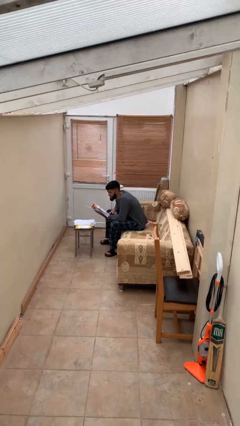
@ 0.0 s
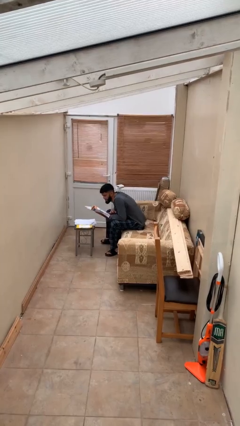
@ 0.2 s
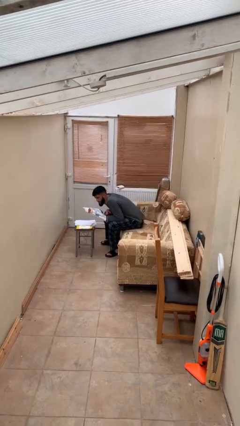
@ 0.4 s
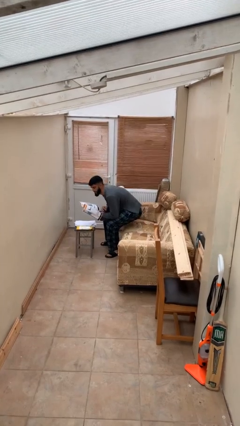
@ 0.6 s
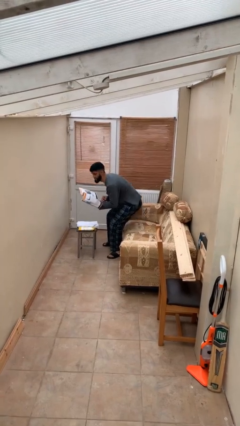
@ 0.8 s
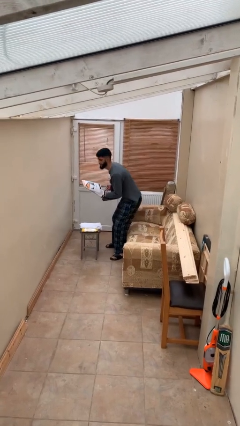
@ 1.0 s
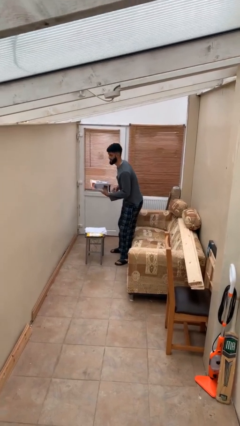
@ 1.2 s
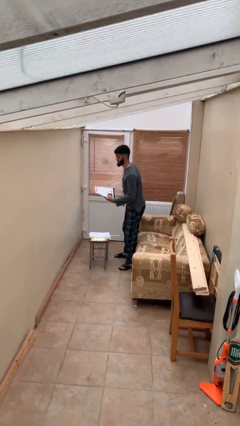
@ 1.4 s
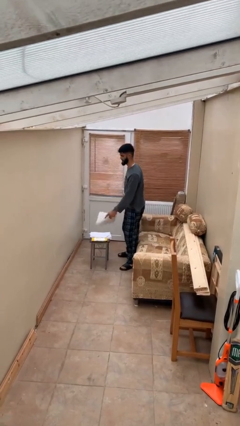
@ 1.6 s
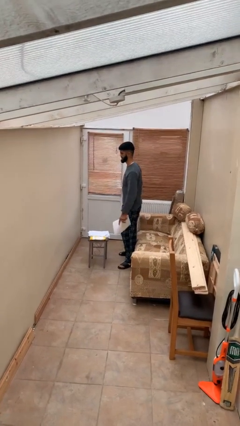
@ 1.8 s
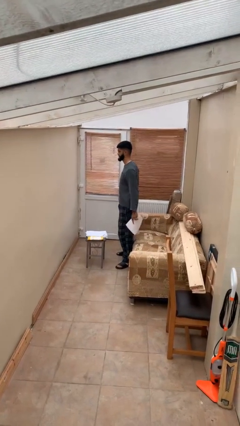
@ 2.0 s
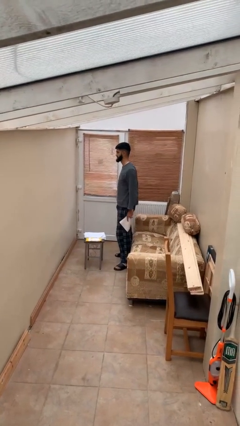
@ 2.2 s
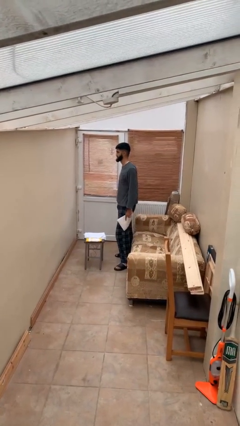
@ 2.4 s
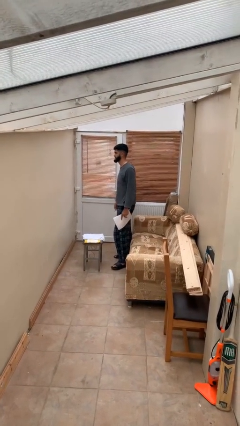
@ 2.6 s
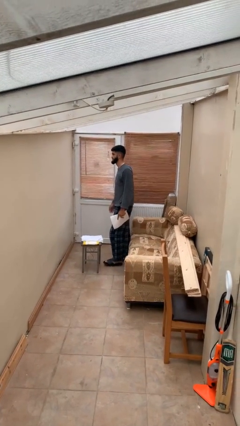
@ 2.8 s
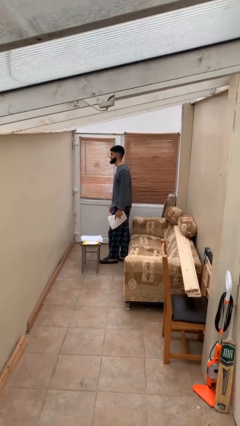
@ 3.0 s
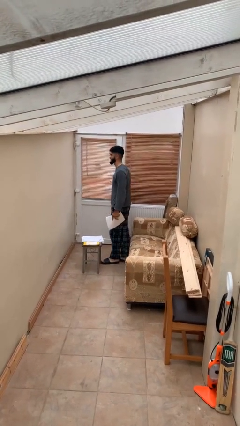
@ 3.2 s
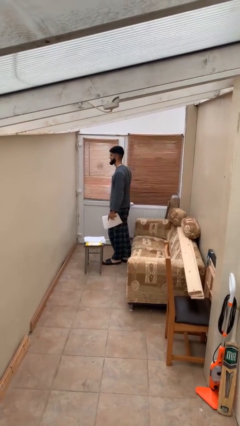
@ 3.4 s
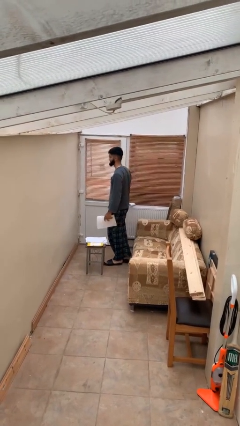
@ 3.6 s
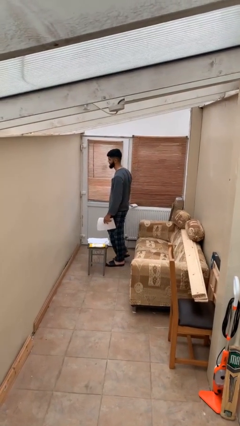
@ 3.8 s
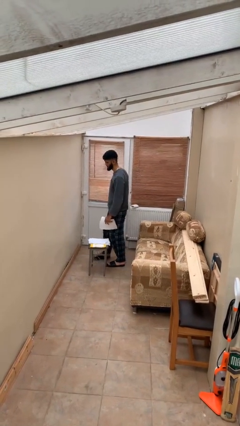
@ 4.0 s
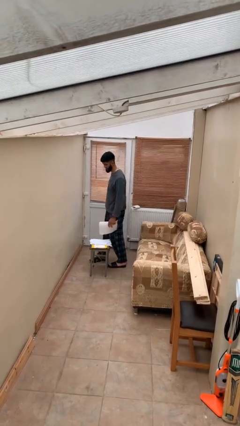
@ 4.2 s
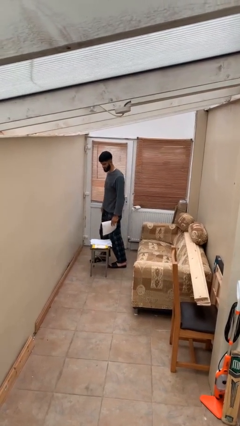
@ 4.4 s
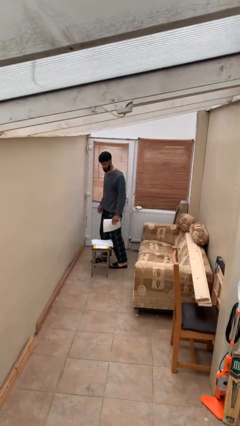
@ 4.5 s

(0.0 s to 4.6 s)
person stands up

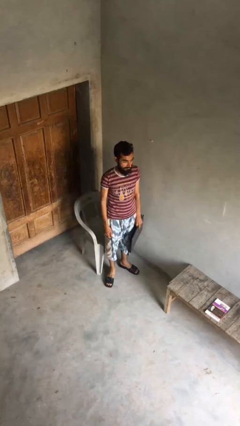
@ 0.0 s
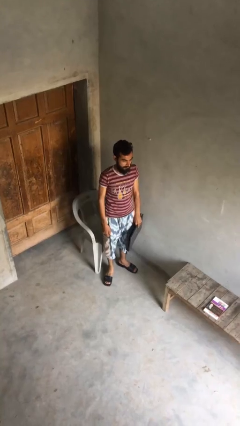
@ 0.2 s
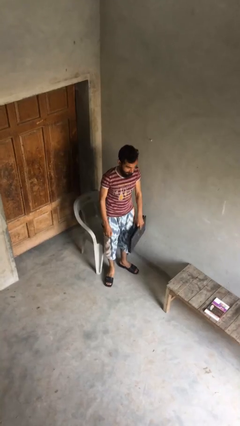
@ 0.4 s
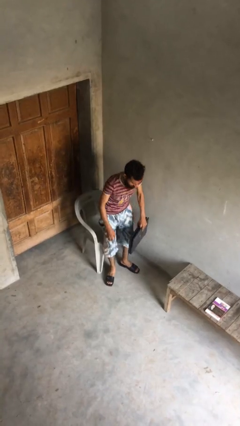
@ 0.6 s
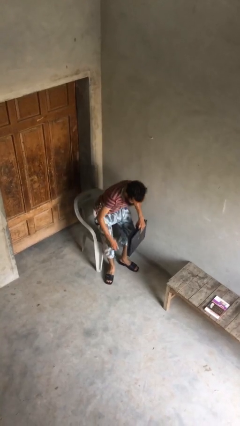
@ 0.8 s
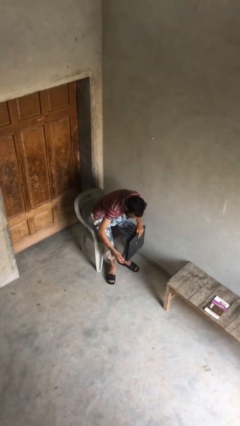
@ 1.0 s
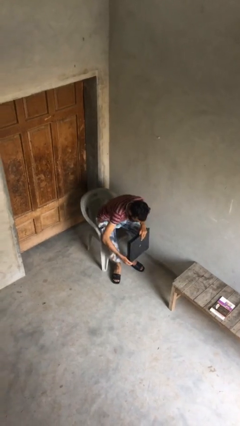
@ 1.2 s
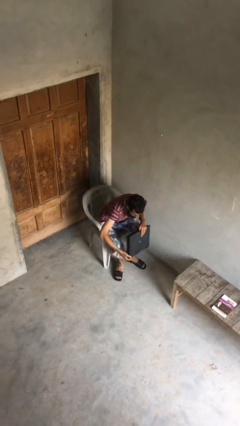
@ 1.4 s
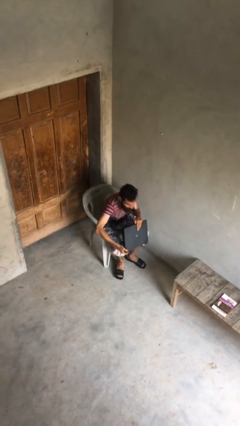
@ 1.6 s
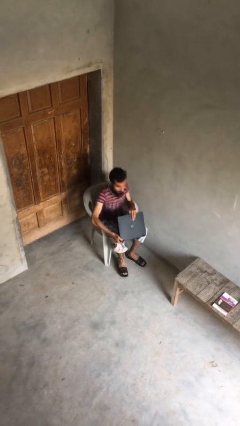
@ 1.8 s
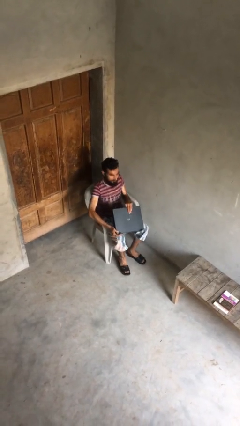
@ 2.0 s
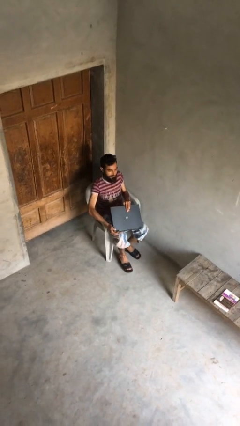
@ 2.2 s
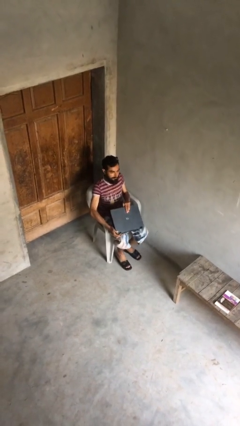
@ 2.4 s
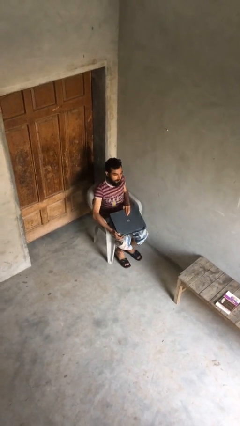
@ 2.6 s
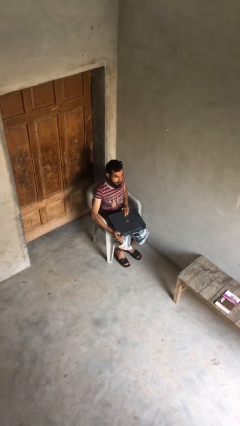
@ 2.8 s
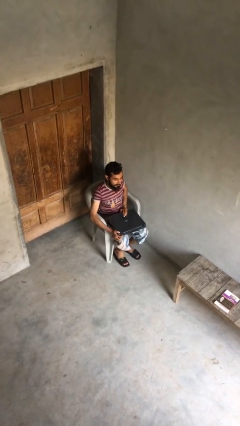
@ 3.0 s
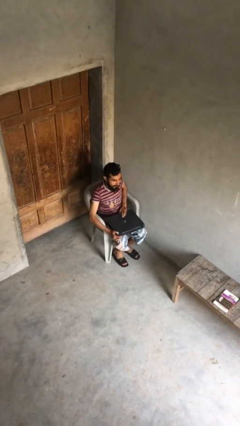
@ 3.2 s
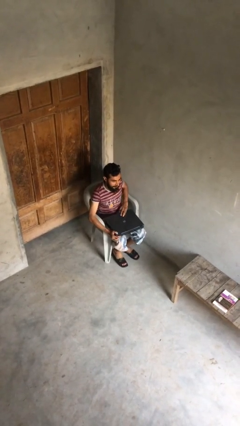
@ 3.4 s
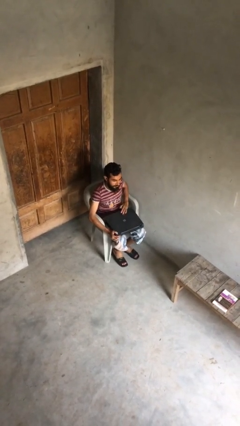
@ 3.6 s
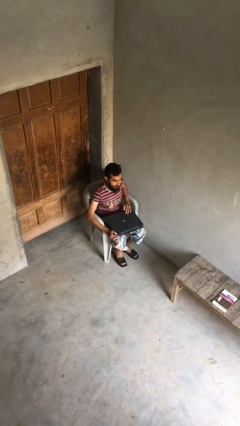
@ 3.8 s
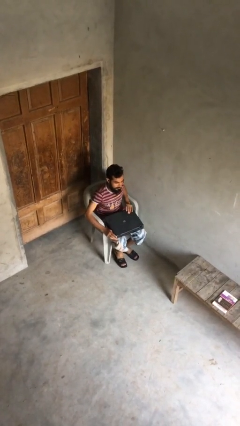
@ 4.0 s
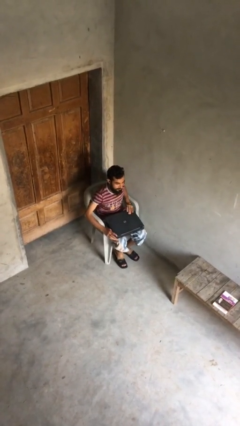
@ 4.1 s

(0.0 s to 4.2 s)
person sits down

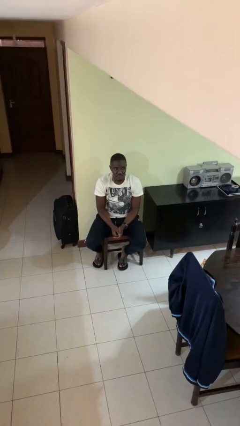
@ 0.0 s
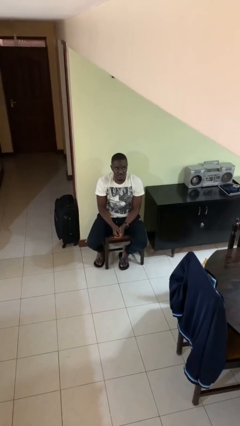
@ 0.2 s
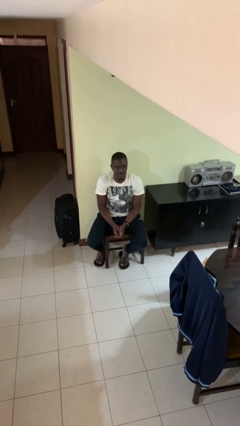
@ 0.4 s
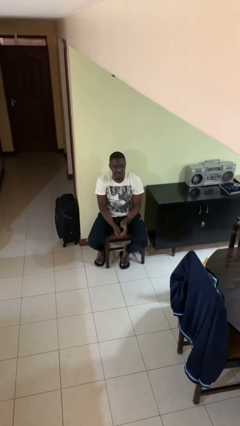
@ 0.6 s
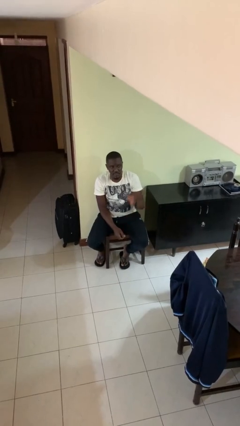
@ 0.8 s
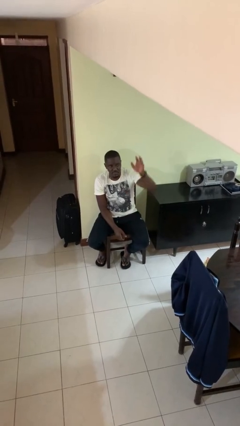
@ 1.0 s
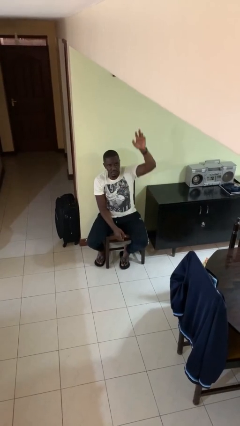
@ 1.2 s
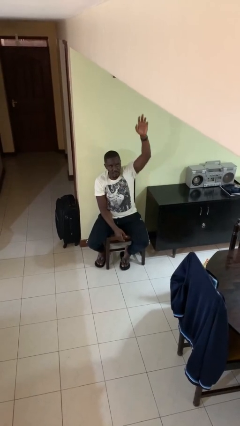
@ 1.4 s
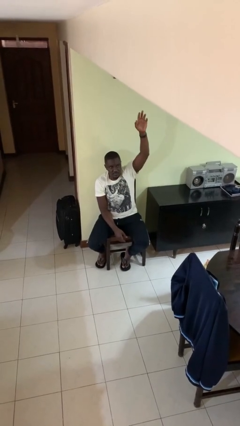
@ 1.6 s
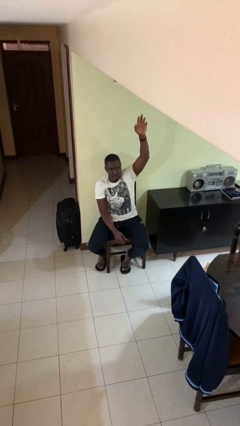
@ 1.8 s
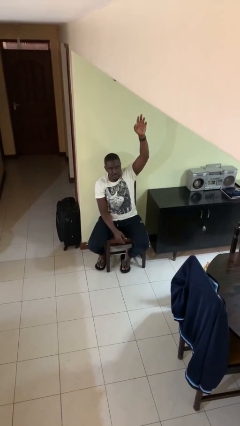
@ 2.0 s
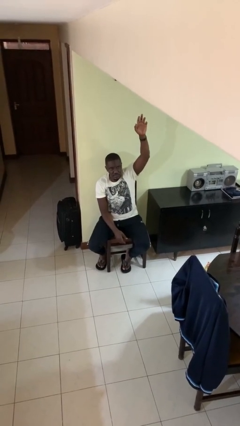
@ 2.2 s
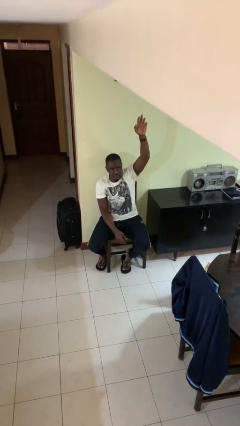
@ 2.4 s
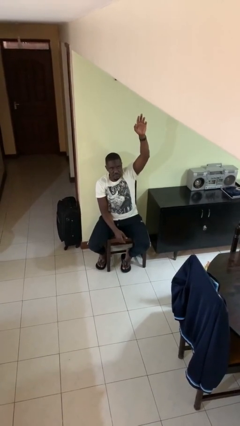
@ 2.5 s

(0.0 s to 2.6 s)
person gestures raise hand

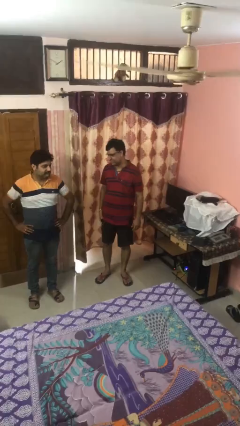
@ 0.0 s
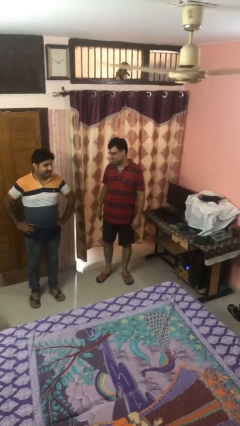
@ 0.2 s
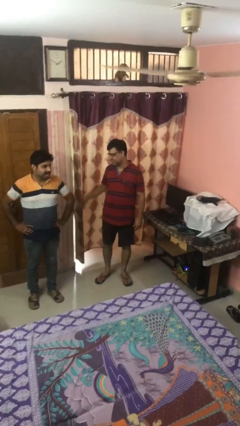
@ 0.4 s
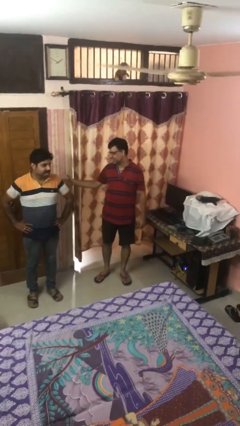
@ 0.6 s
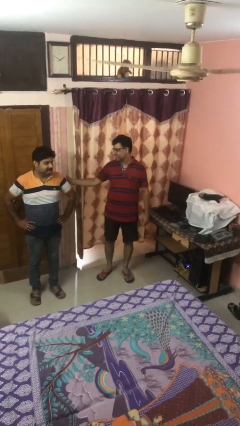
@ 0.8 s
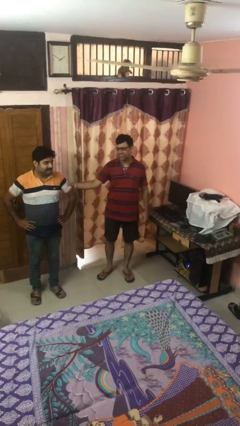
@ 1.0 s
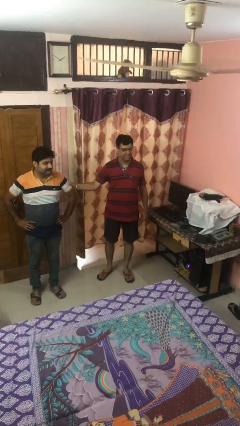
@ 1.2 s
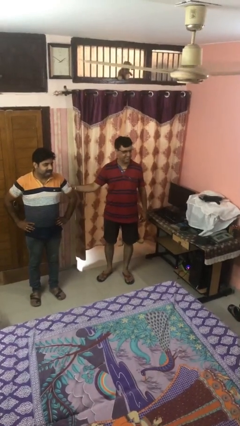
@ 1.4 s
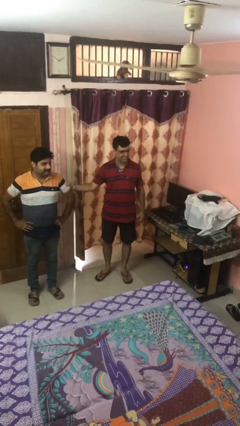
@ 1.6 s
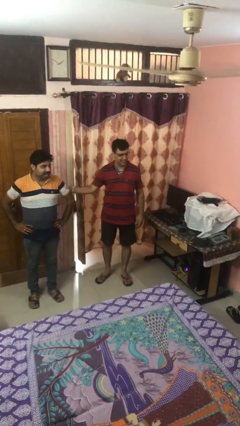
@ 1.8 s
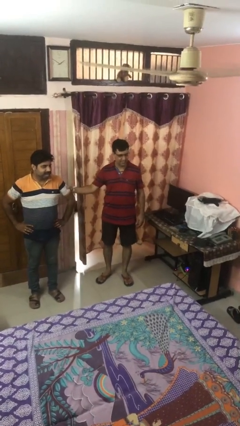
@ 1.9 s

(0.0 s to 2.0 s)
person grabs person by bicep

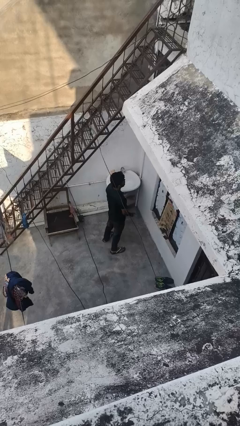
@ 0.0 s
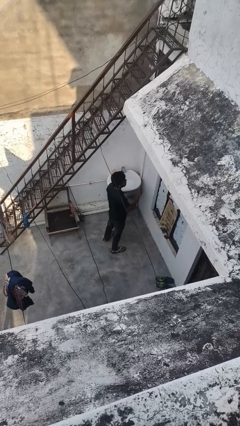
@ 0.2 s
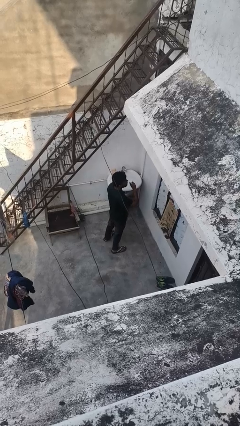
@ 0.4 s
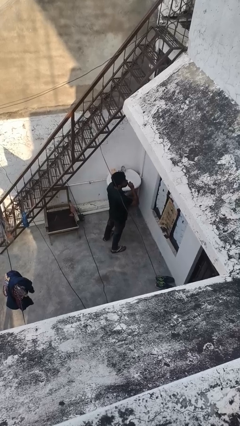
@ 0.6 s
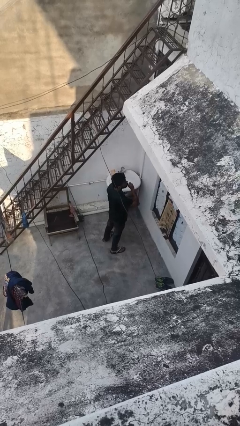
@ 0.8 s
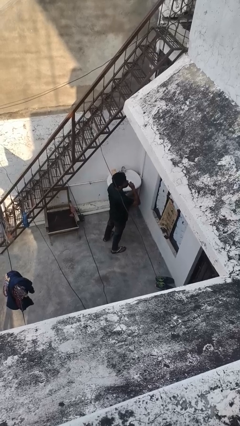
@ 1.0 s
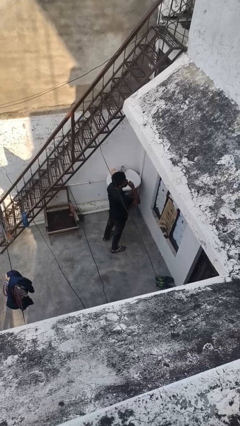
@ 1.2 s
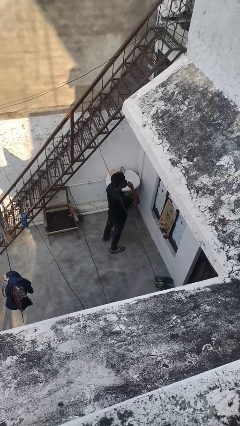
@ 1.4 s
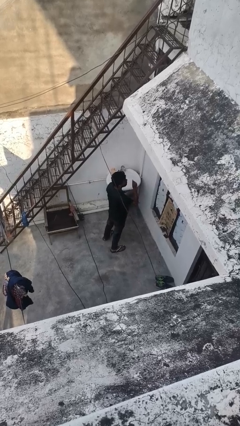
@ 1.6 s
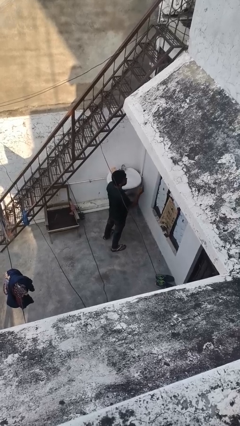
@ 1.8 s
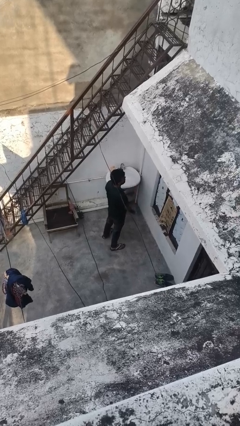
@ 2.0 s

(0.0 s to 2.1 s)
person gestures be quiet

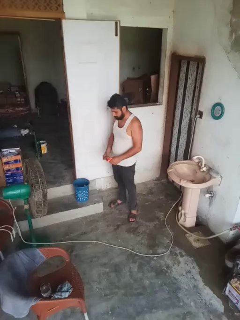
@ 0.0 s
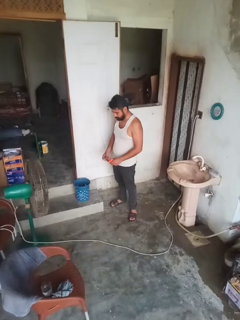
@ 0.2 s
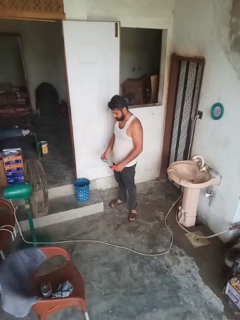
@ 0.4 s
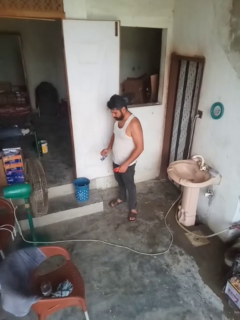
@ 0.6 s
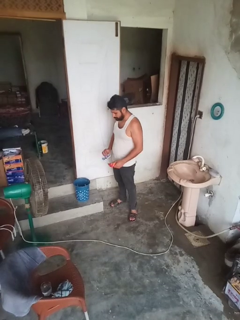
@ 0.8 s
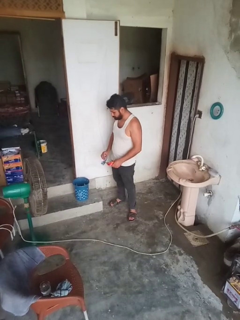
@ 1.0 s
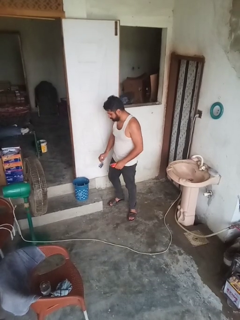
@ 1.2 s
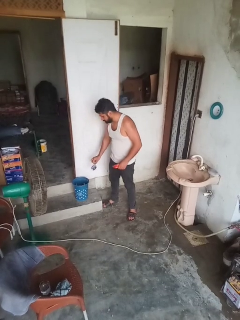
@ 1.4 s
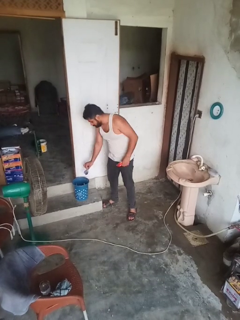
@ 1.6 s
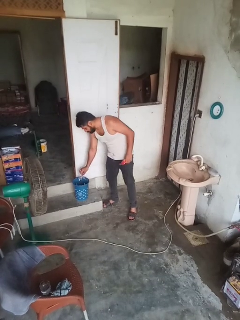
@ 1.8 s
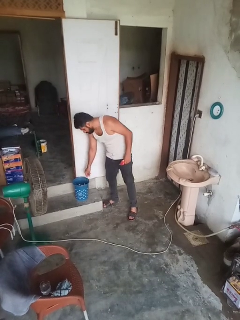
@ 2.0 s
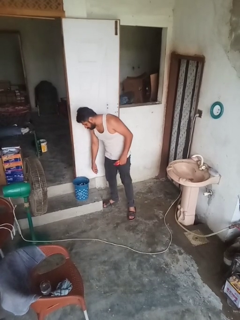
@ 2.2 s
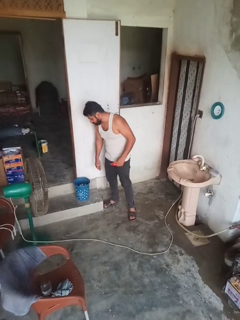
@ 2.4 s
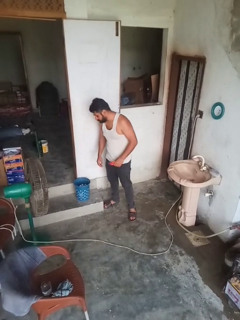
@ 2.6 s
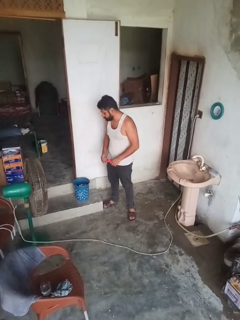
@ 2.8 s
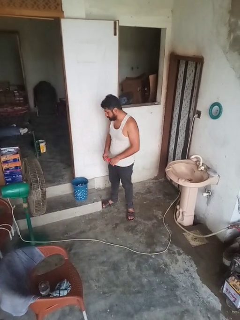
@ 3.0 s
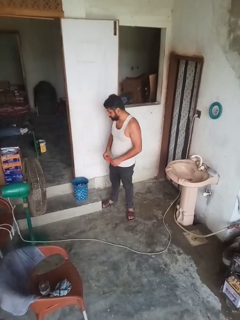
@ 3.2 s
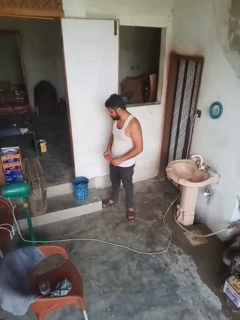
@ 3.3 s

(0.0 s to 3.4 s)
person discards trash
